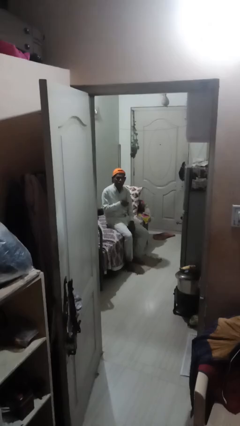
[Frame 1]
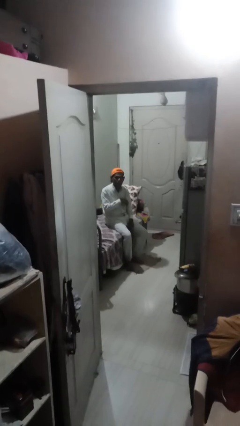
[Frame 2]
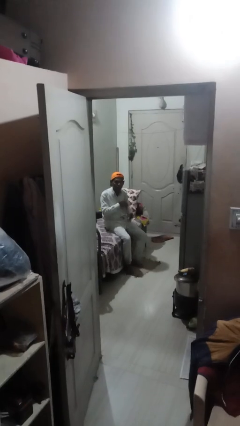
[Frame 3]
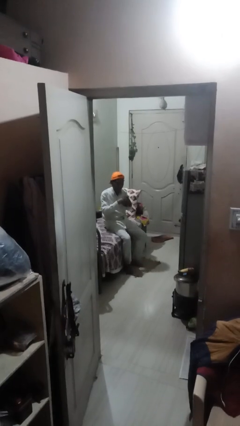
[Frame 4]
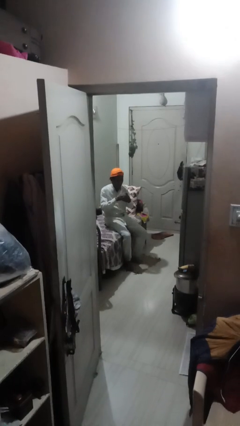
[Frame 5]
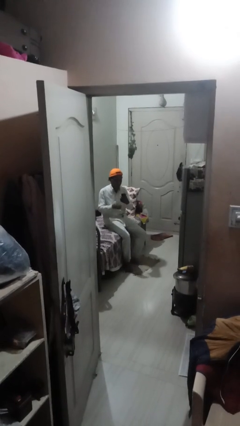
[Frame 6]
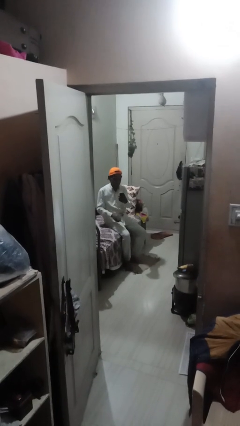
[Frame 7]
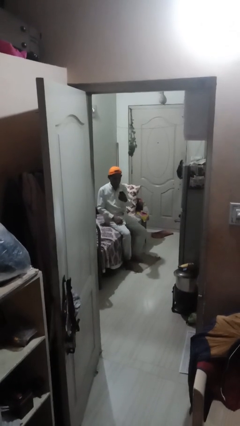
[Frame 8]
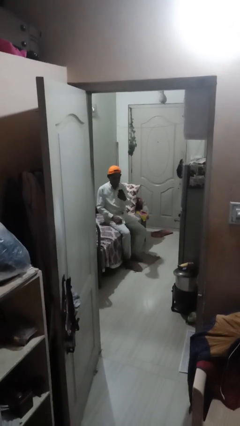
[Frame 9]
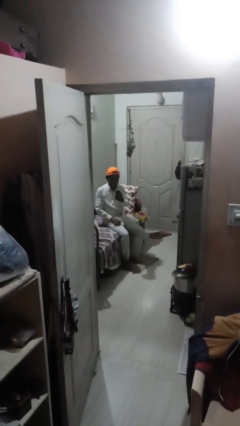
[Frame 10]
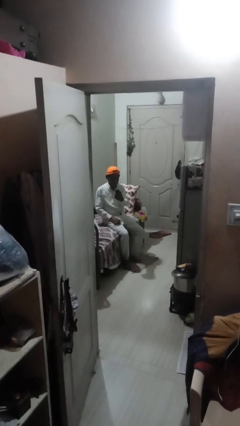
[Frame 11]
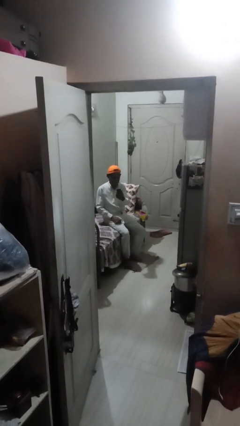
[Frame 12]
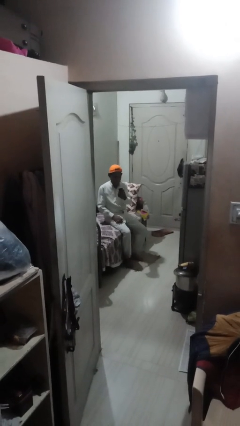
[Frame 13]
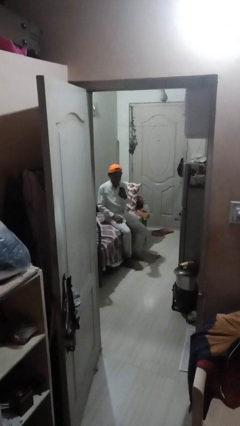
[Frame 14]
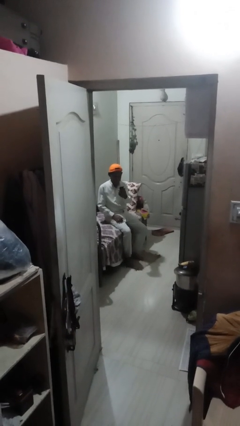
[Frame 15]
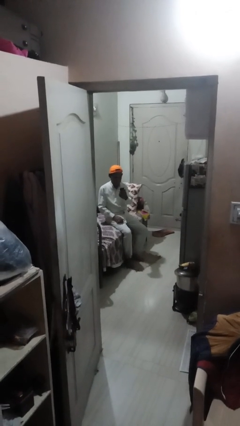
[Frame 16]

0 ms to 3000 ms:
person takes phone from pocket

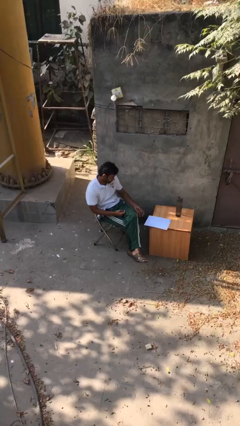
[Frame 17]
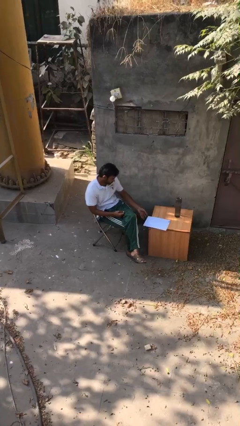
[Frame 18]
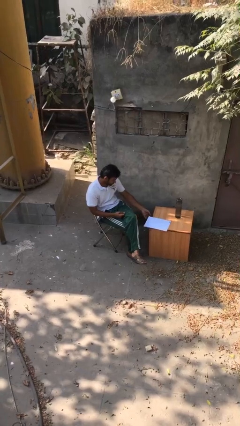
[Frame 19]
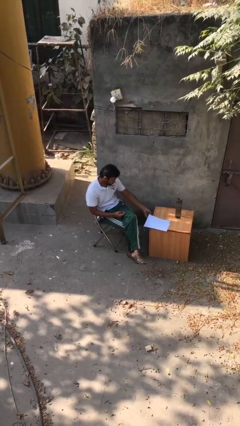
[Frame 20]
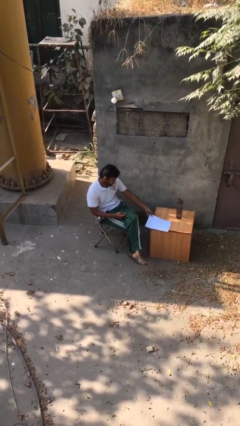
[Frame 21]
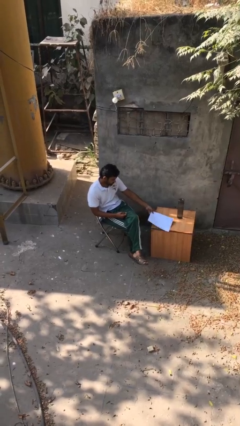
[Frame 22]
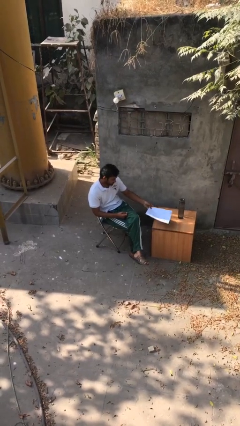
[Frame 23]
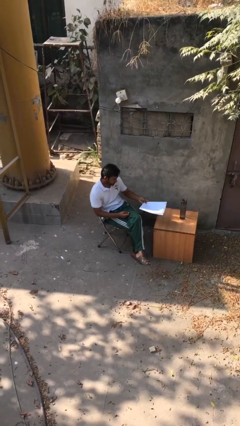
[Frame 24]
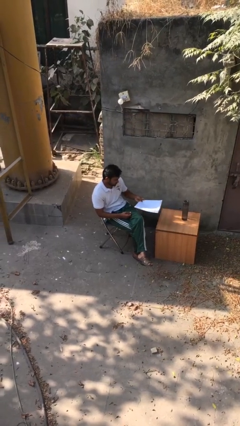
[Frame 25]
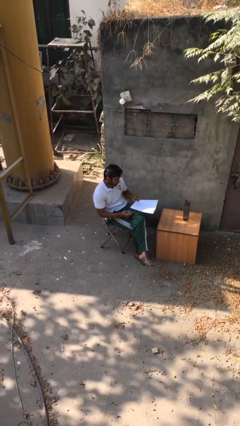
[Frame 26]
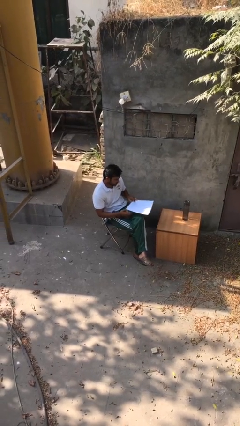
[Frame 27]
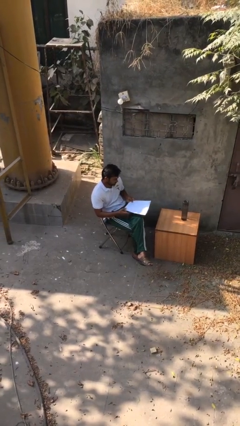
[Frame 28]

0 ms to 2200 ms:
person picks up object from table

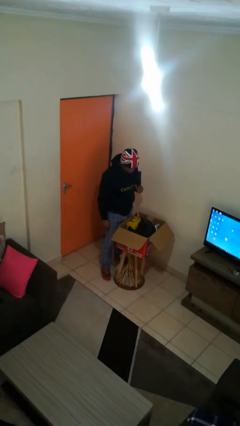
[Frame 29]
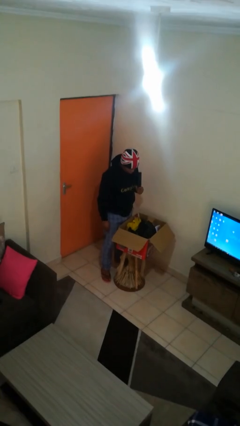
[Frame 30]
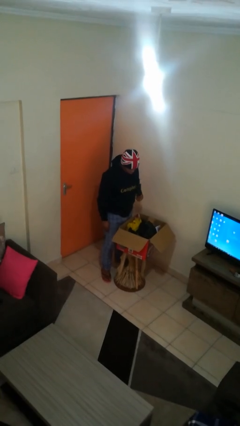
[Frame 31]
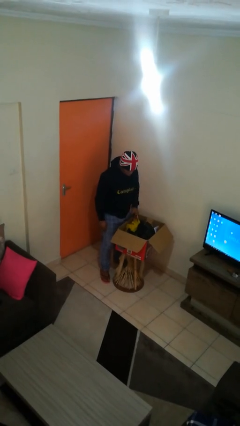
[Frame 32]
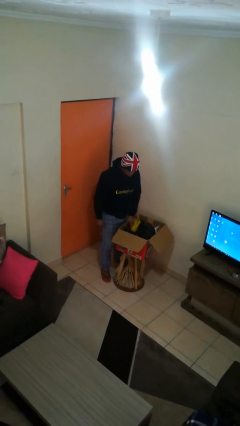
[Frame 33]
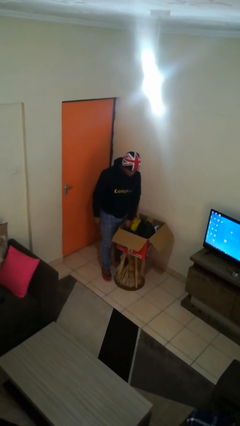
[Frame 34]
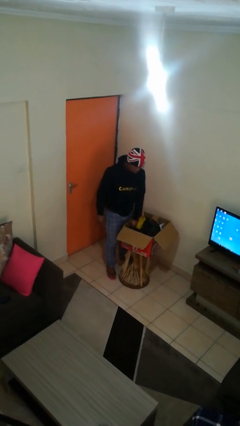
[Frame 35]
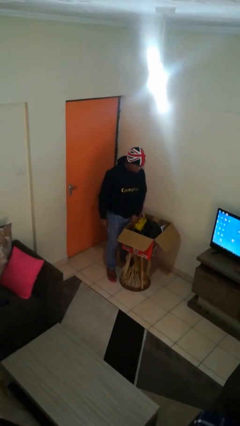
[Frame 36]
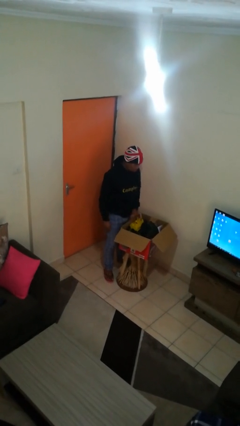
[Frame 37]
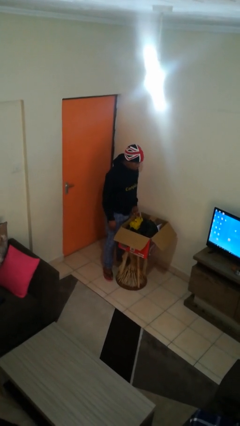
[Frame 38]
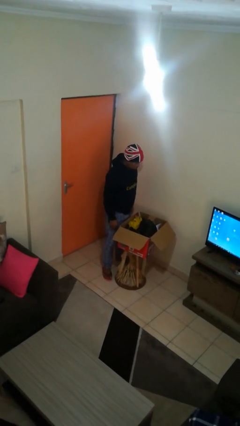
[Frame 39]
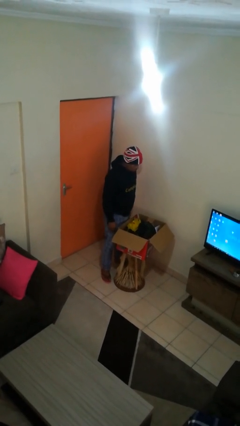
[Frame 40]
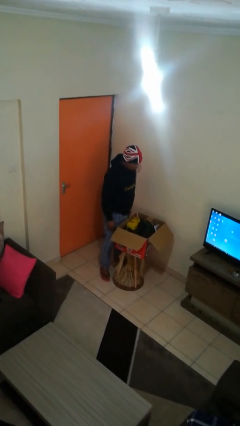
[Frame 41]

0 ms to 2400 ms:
person puts object into box

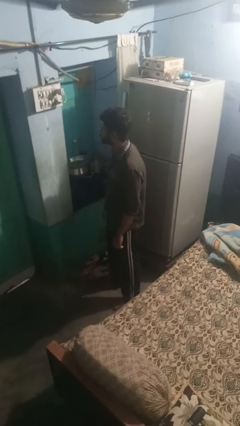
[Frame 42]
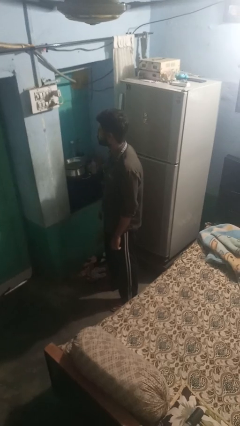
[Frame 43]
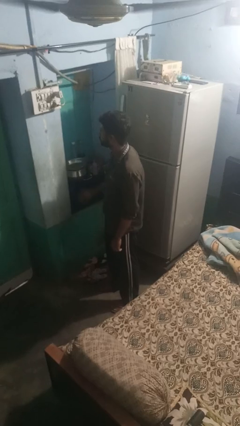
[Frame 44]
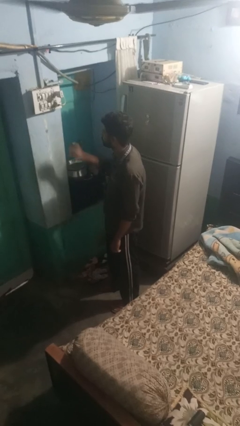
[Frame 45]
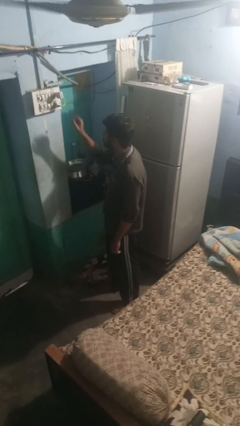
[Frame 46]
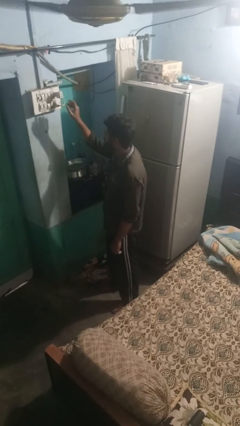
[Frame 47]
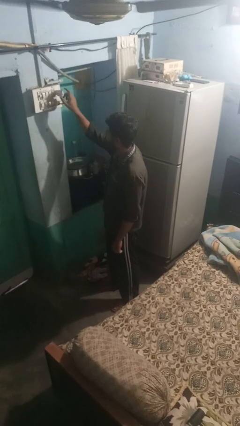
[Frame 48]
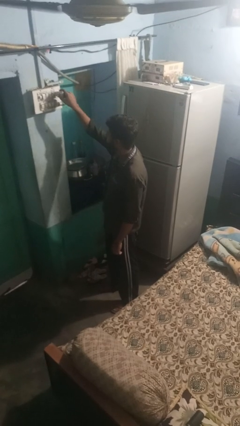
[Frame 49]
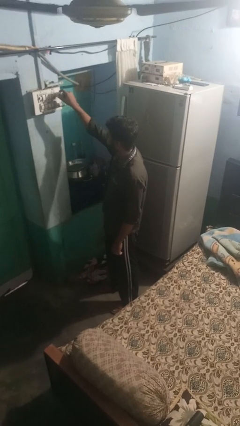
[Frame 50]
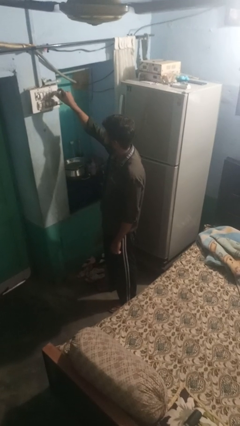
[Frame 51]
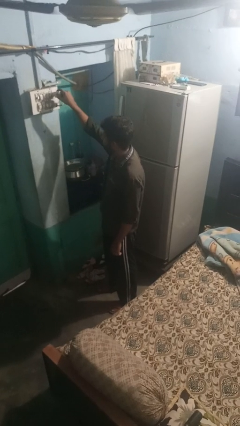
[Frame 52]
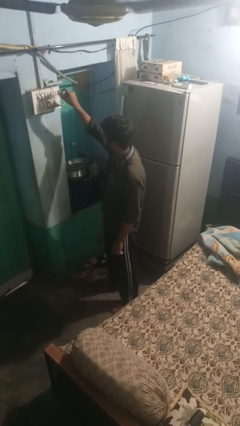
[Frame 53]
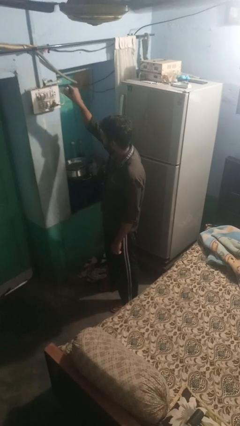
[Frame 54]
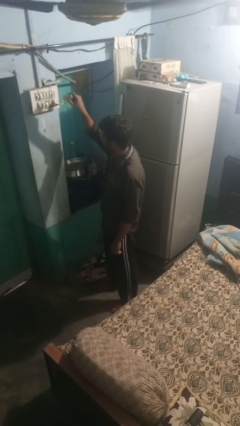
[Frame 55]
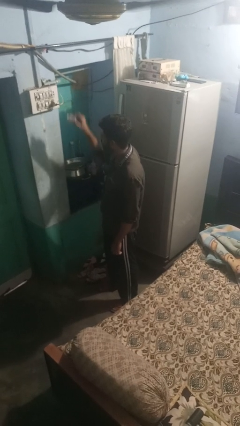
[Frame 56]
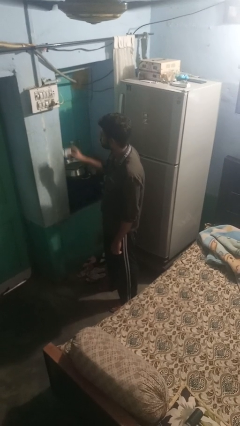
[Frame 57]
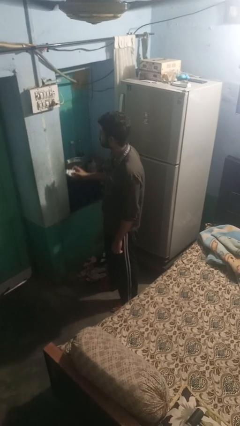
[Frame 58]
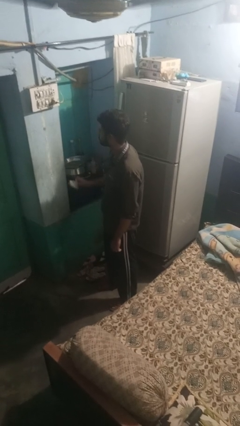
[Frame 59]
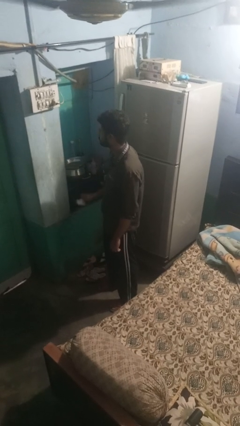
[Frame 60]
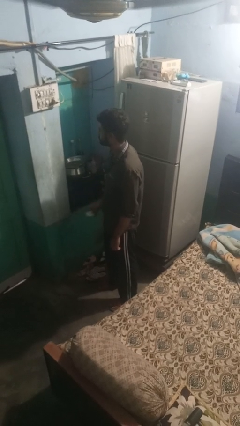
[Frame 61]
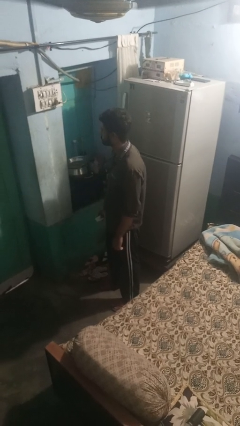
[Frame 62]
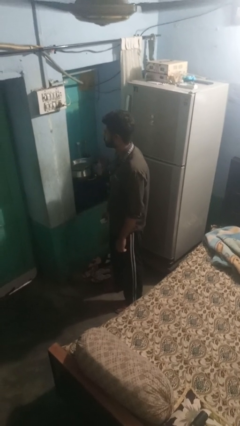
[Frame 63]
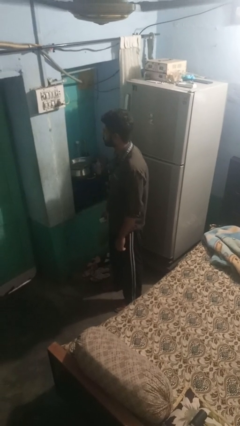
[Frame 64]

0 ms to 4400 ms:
person unplugs from electrical socket

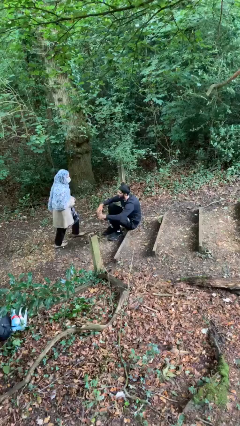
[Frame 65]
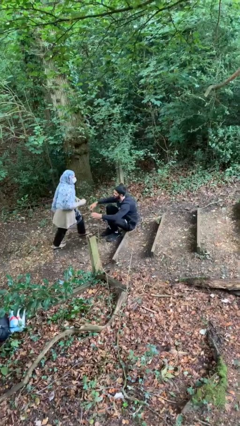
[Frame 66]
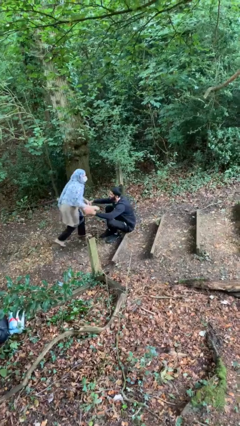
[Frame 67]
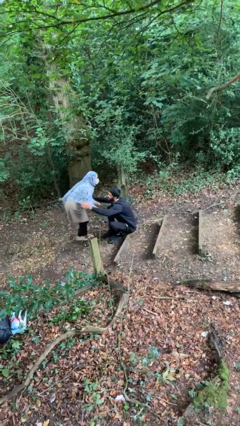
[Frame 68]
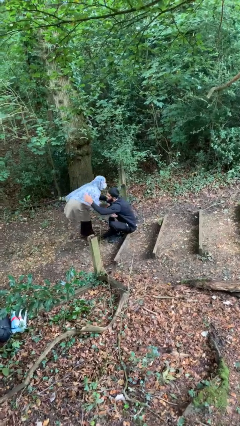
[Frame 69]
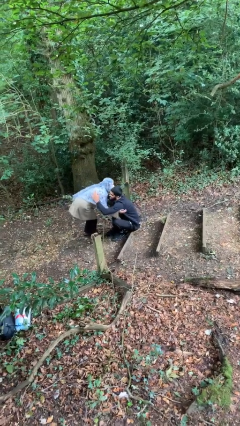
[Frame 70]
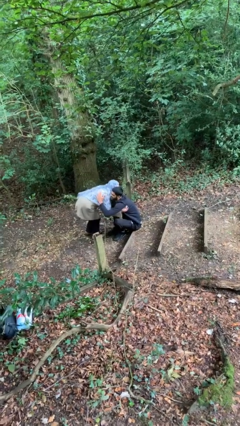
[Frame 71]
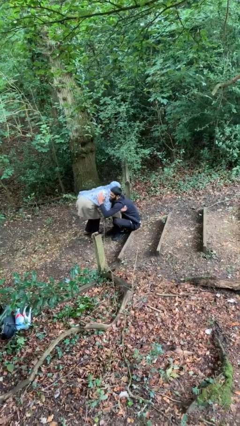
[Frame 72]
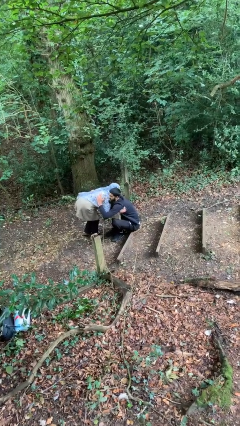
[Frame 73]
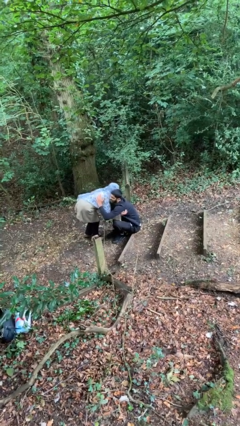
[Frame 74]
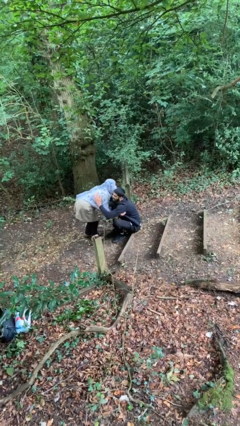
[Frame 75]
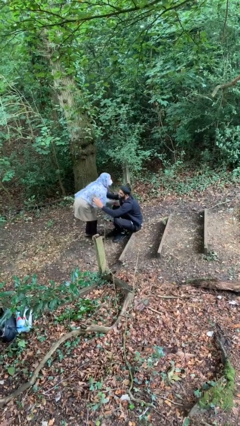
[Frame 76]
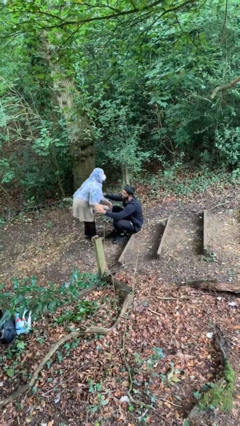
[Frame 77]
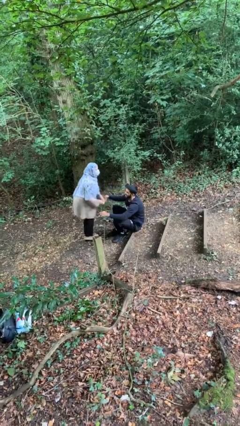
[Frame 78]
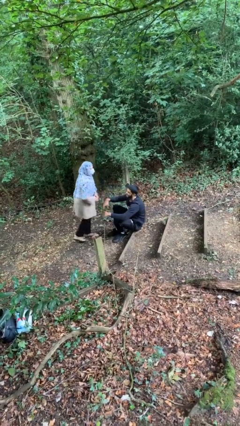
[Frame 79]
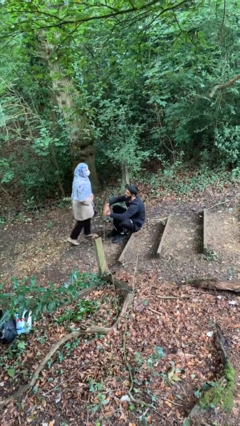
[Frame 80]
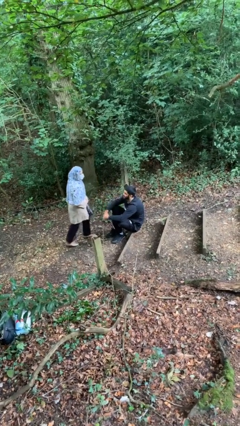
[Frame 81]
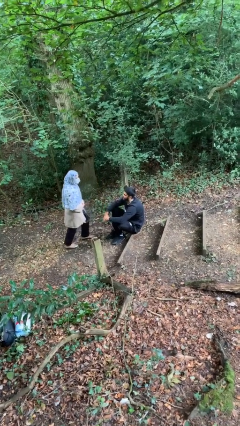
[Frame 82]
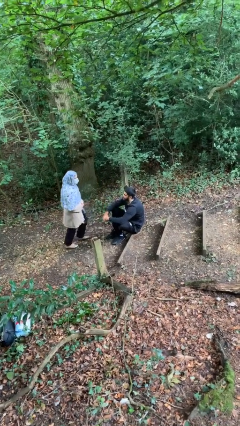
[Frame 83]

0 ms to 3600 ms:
person embraces person

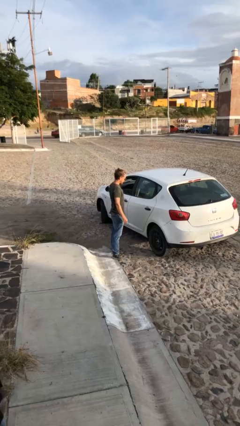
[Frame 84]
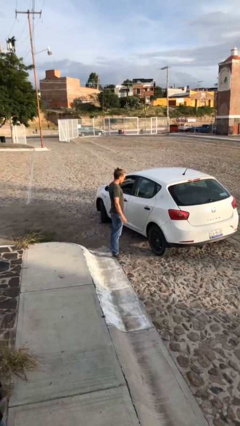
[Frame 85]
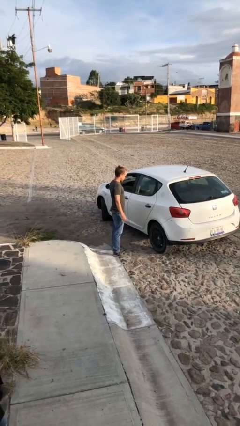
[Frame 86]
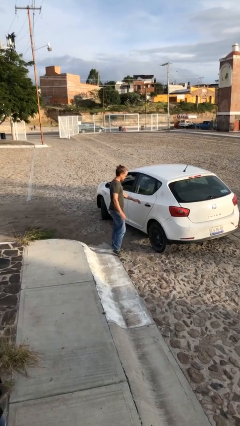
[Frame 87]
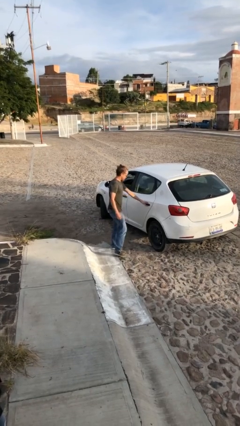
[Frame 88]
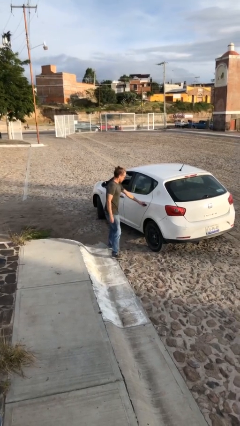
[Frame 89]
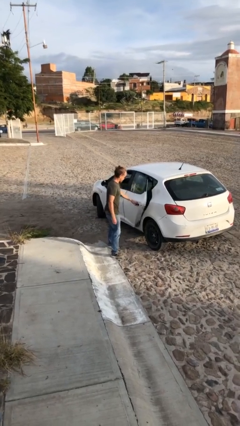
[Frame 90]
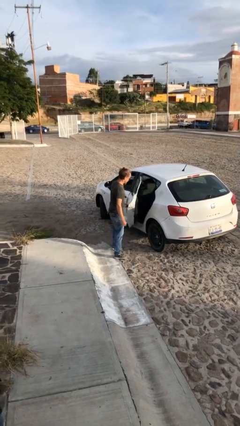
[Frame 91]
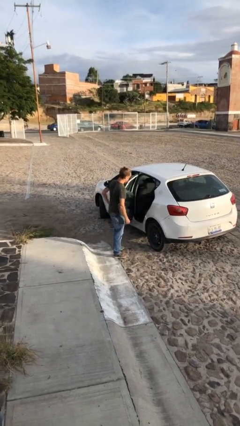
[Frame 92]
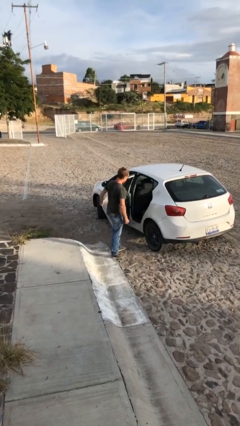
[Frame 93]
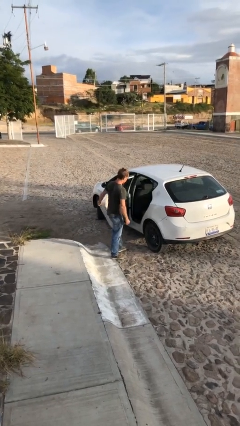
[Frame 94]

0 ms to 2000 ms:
person opens car door
